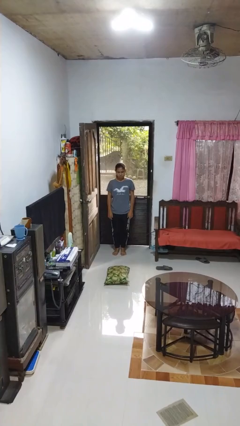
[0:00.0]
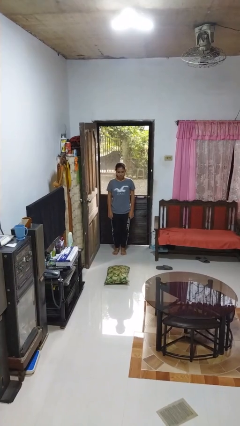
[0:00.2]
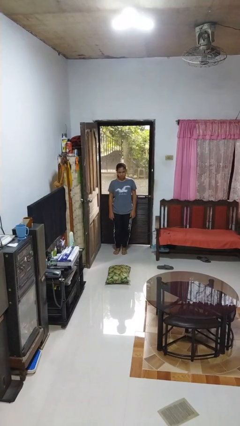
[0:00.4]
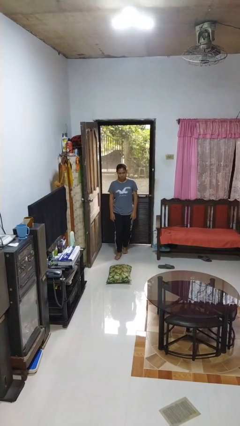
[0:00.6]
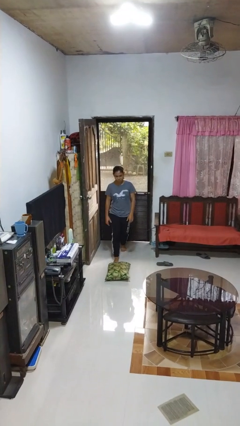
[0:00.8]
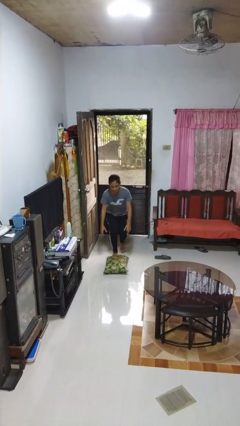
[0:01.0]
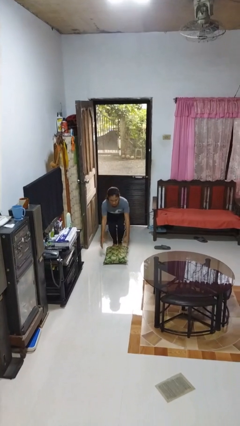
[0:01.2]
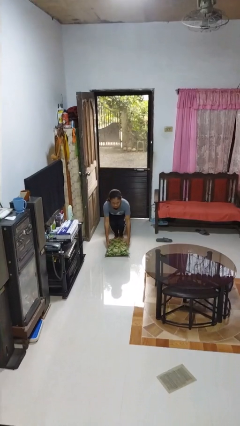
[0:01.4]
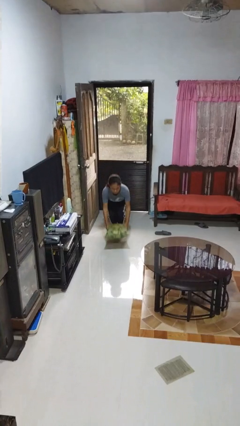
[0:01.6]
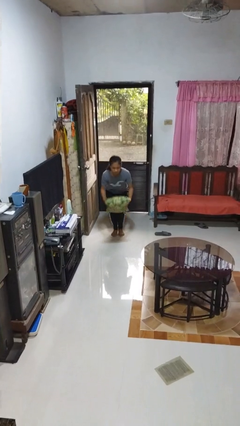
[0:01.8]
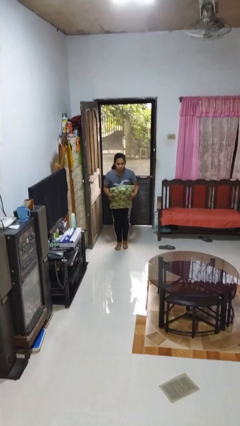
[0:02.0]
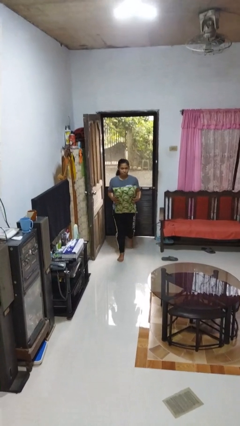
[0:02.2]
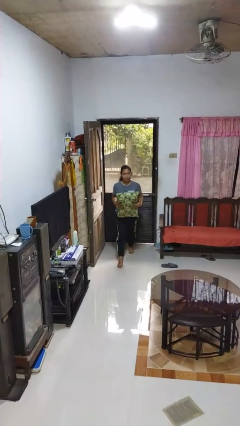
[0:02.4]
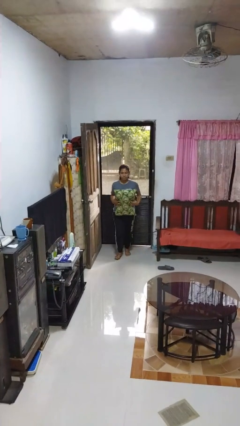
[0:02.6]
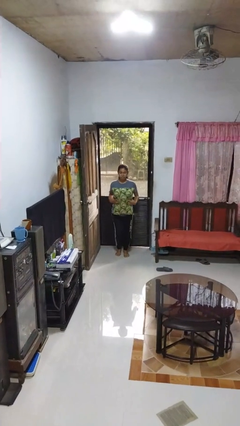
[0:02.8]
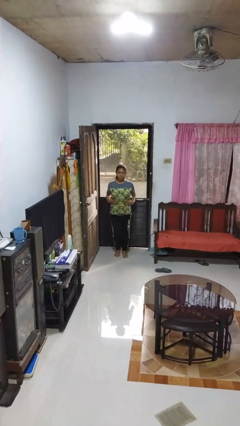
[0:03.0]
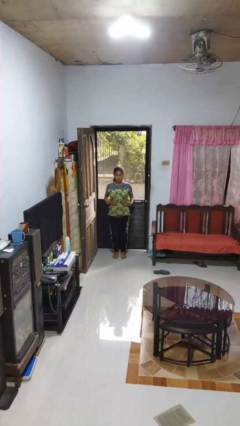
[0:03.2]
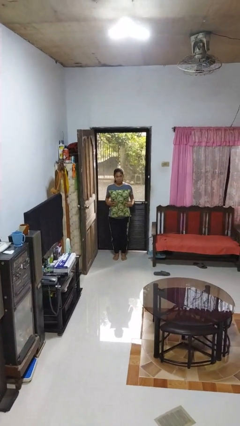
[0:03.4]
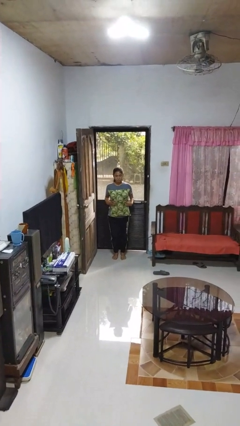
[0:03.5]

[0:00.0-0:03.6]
person picks up object from floor

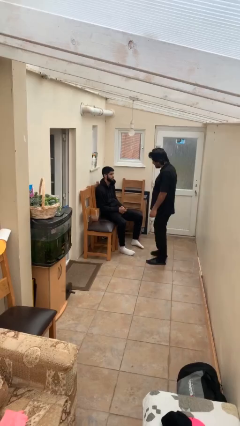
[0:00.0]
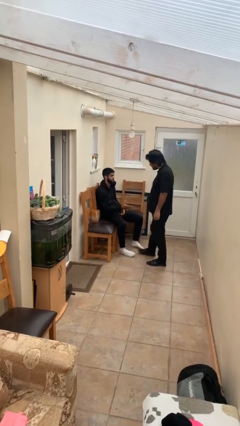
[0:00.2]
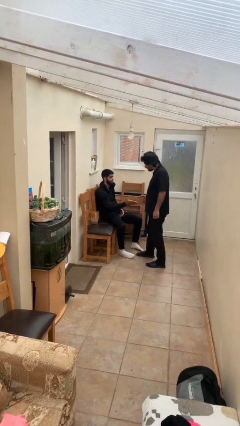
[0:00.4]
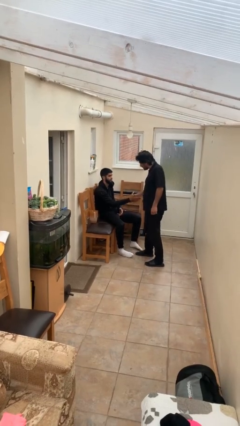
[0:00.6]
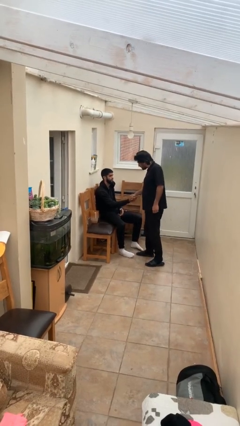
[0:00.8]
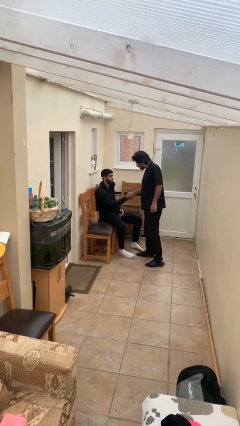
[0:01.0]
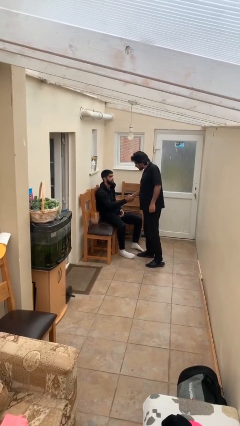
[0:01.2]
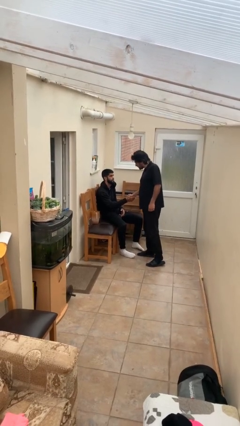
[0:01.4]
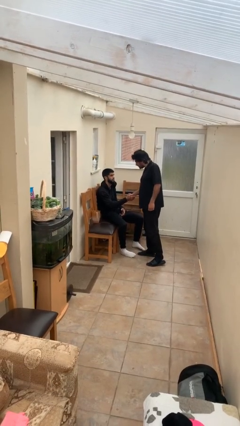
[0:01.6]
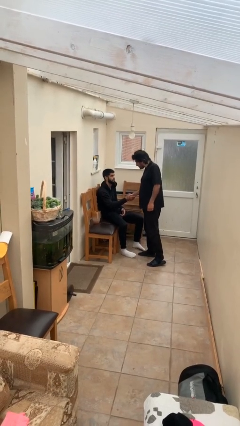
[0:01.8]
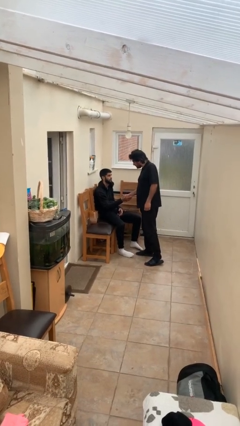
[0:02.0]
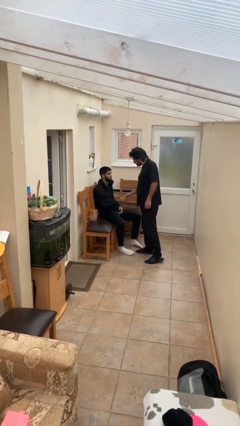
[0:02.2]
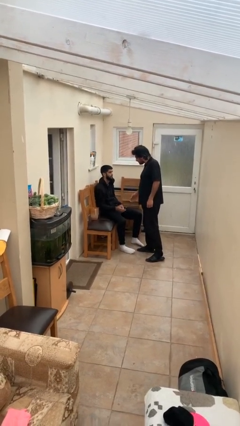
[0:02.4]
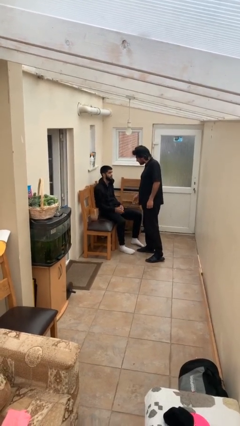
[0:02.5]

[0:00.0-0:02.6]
person shakes hand

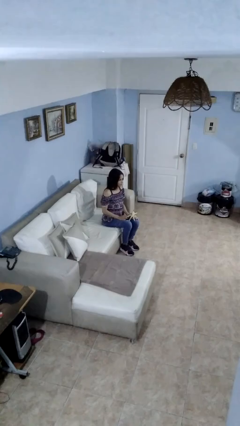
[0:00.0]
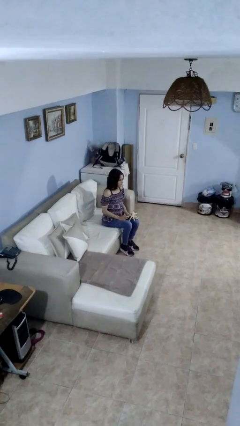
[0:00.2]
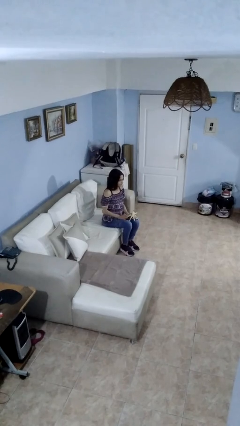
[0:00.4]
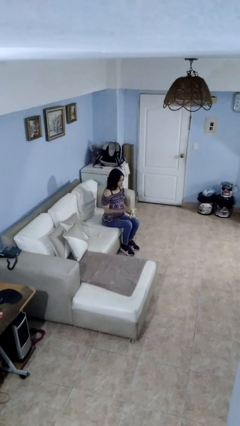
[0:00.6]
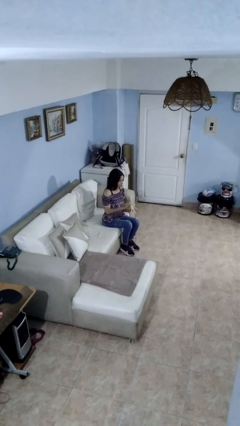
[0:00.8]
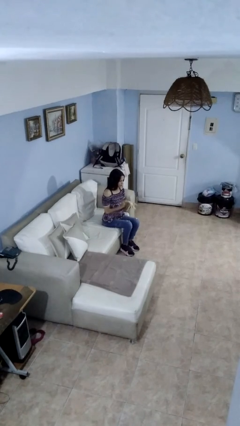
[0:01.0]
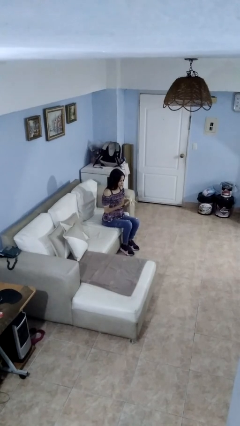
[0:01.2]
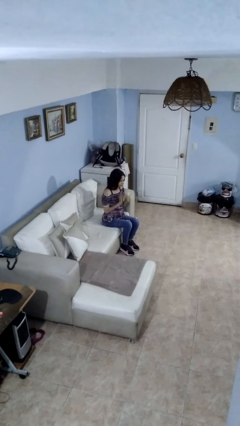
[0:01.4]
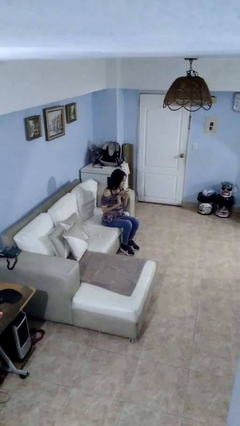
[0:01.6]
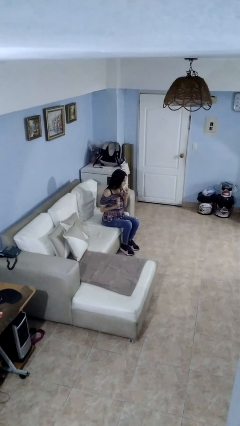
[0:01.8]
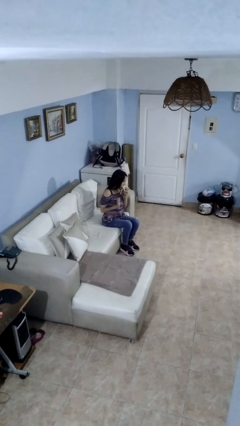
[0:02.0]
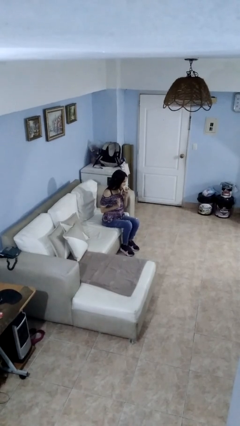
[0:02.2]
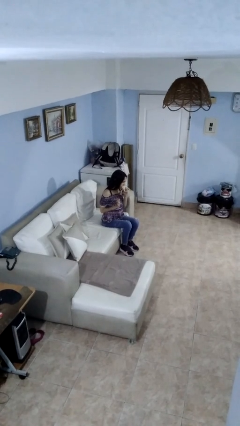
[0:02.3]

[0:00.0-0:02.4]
person eats banana

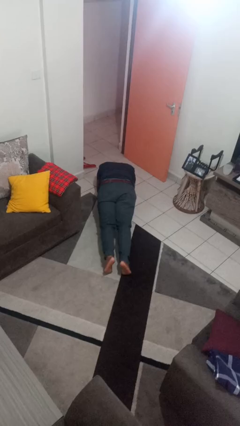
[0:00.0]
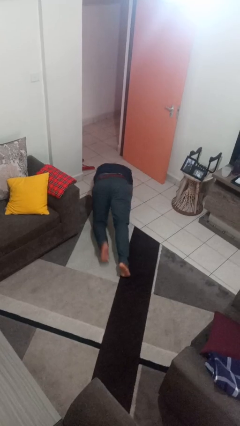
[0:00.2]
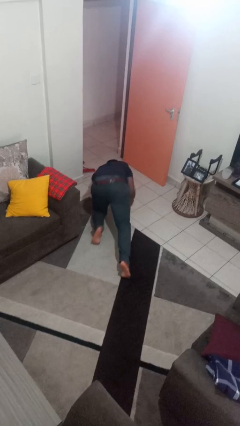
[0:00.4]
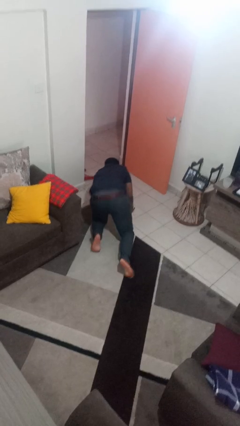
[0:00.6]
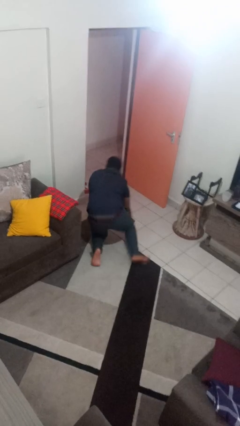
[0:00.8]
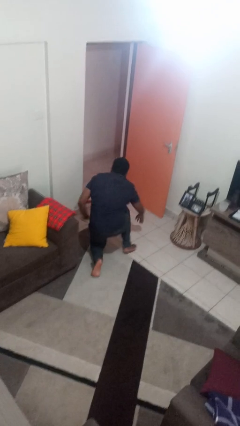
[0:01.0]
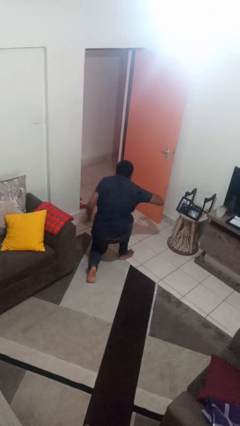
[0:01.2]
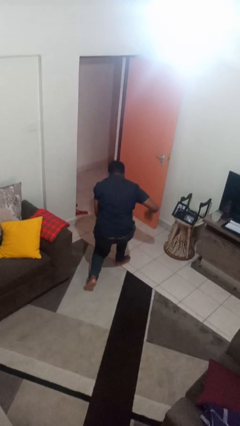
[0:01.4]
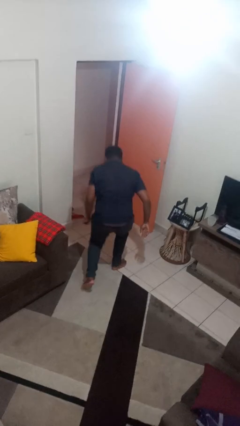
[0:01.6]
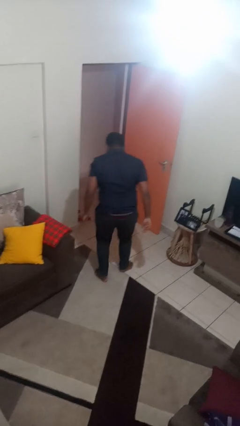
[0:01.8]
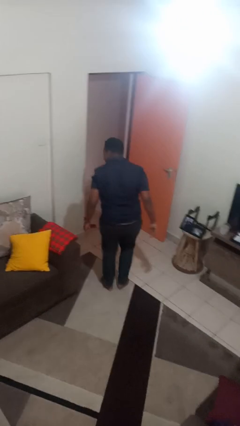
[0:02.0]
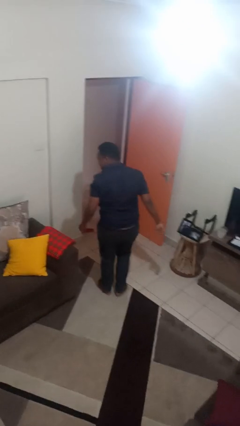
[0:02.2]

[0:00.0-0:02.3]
person stands up from floor

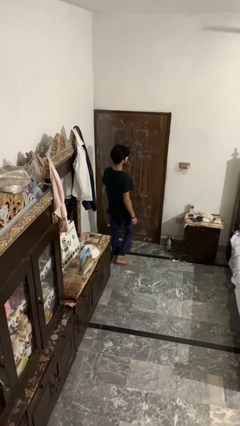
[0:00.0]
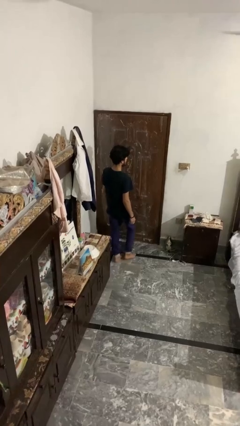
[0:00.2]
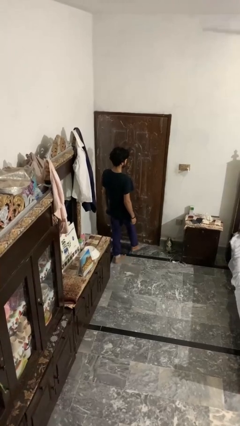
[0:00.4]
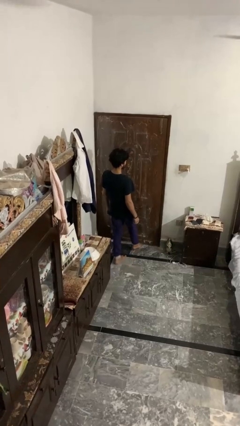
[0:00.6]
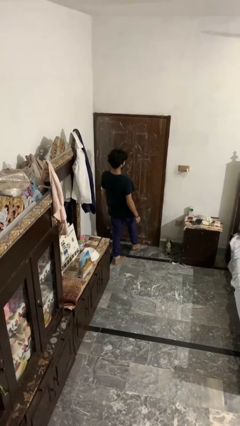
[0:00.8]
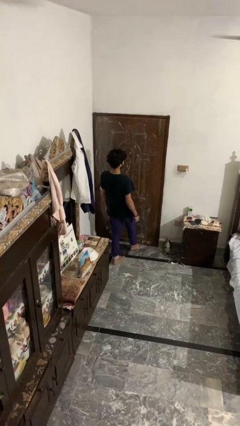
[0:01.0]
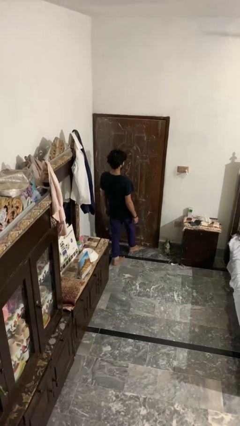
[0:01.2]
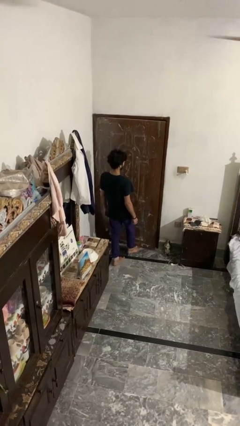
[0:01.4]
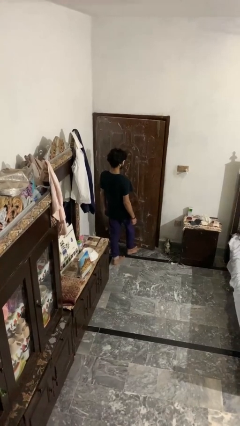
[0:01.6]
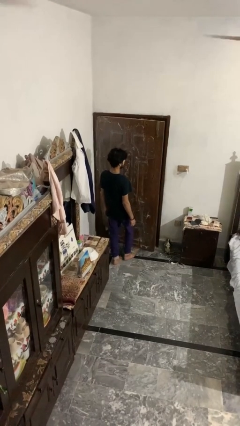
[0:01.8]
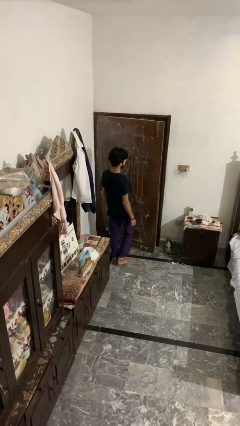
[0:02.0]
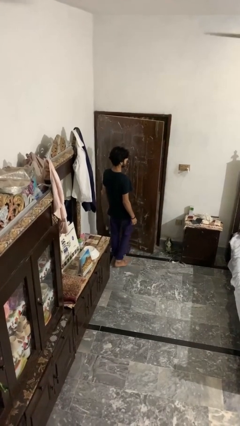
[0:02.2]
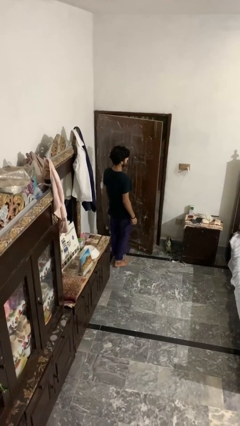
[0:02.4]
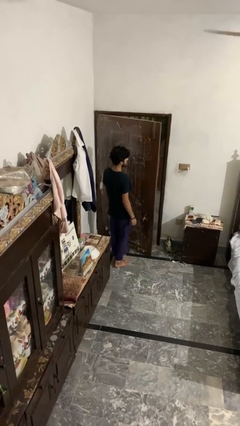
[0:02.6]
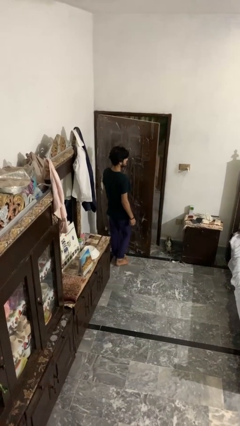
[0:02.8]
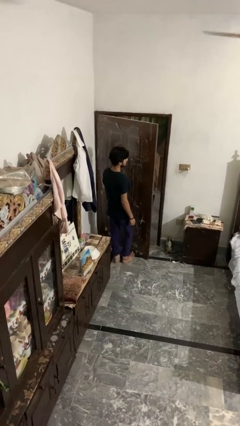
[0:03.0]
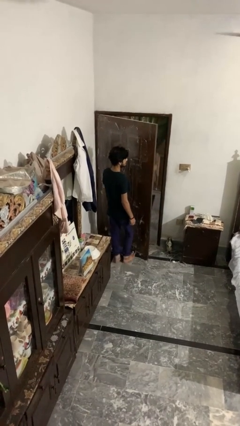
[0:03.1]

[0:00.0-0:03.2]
person opens facility door

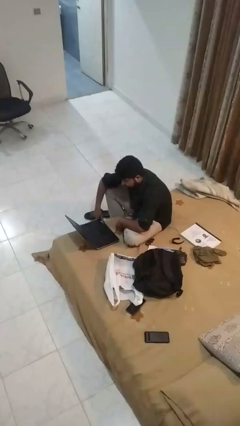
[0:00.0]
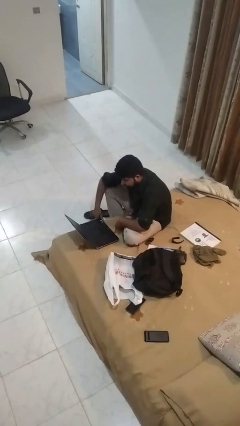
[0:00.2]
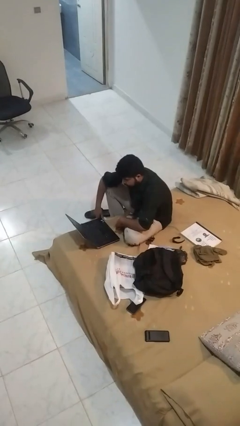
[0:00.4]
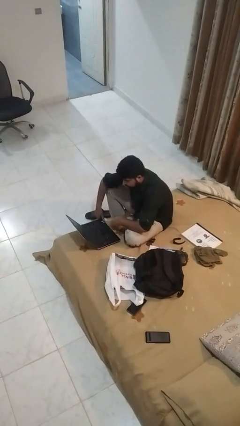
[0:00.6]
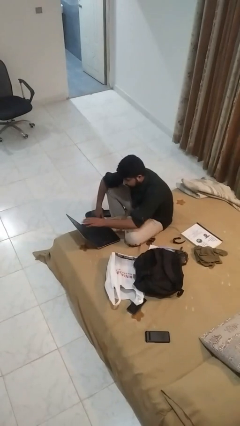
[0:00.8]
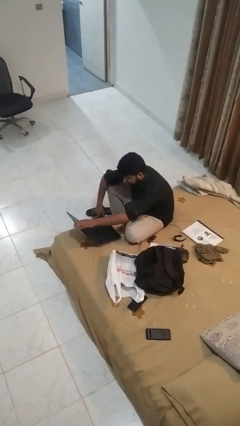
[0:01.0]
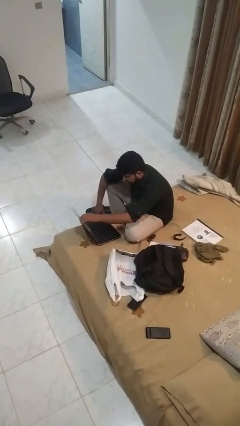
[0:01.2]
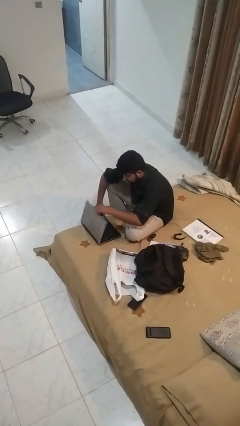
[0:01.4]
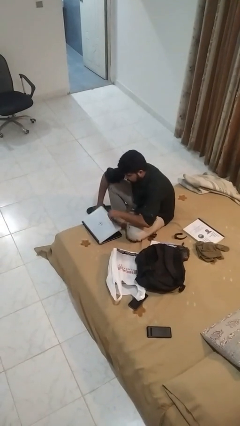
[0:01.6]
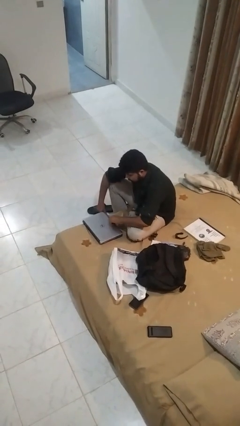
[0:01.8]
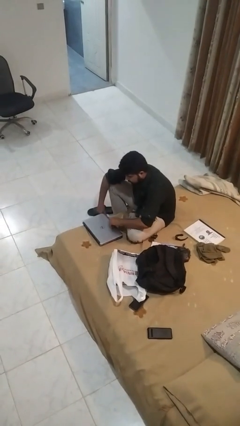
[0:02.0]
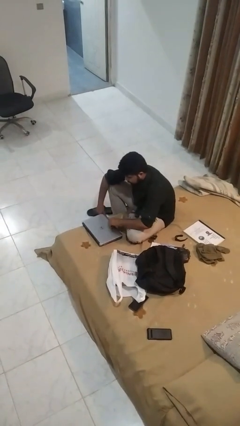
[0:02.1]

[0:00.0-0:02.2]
person closes laptop

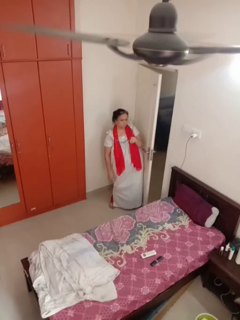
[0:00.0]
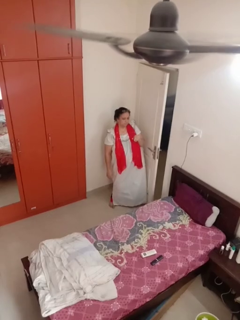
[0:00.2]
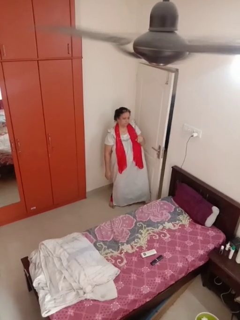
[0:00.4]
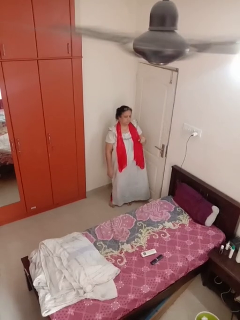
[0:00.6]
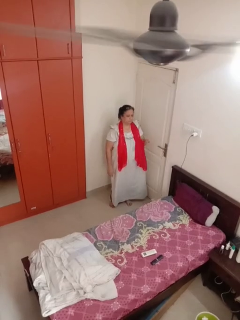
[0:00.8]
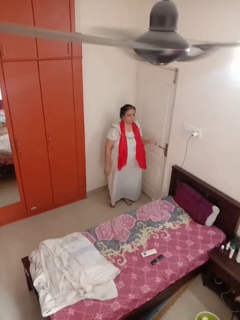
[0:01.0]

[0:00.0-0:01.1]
person closes door with hip

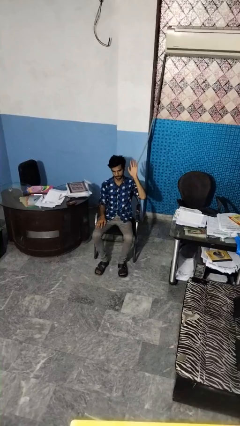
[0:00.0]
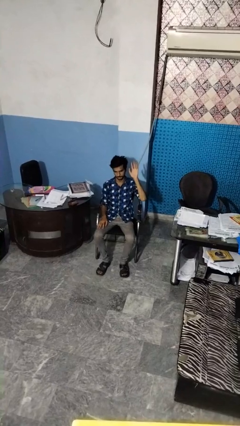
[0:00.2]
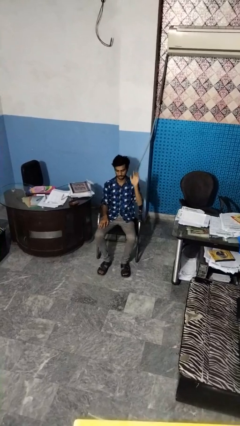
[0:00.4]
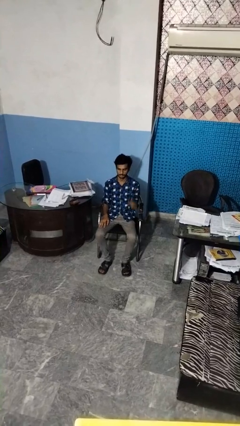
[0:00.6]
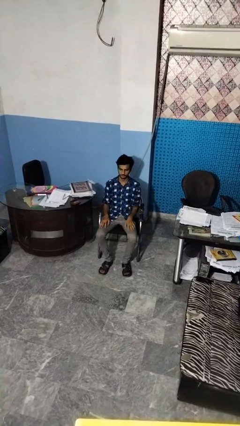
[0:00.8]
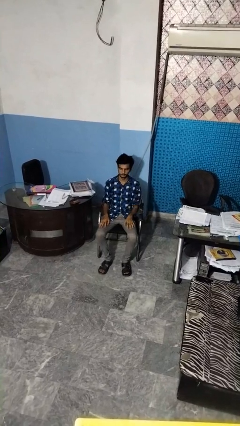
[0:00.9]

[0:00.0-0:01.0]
person gestures lower hand
